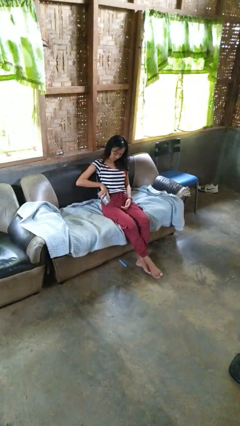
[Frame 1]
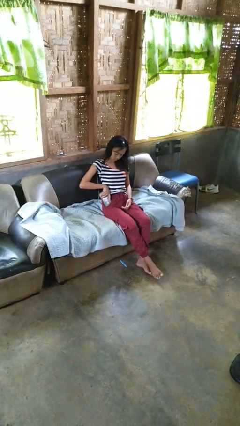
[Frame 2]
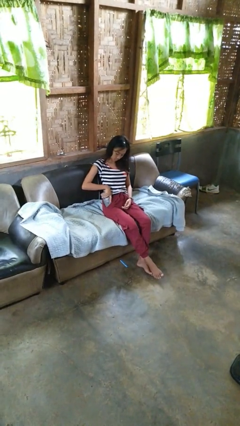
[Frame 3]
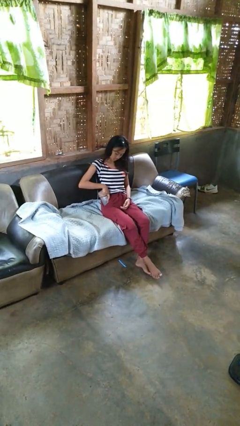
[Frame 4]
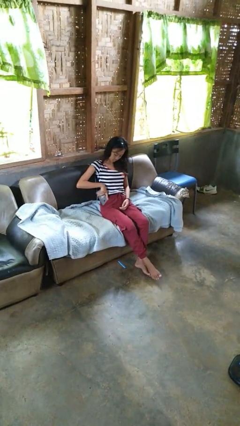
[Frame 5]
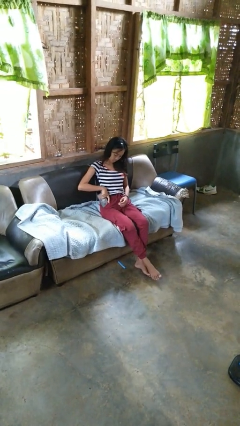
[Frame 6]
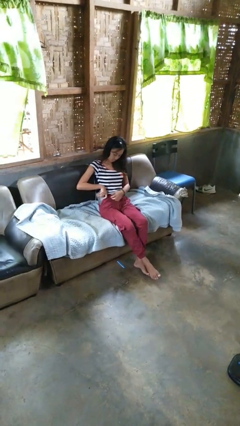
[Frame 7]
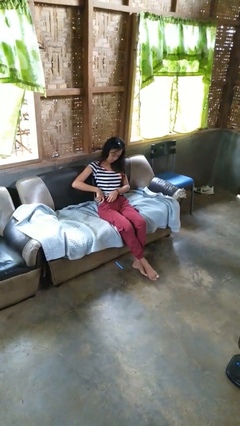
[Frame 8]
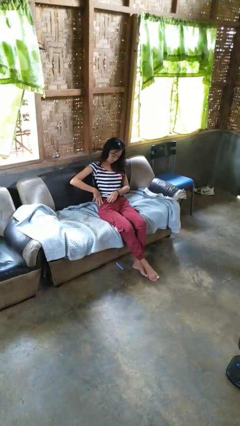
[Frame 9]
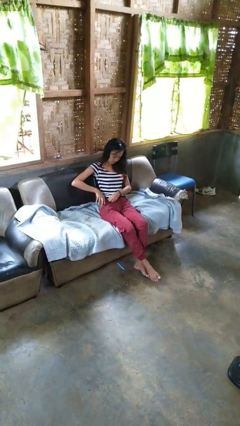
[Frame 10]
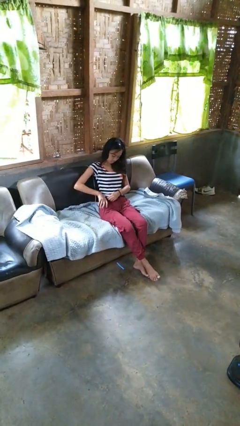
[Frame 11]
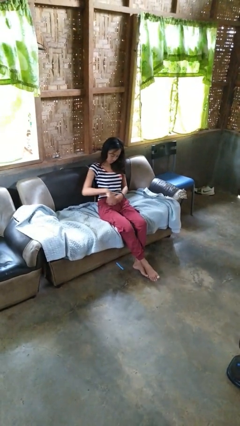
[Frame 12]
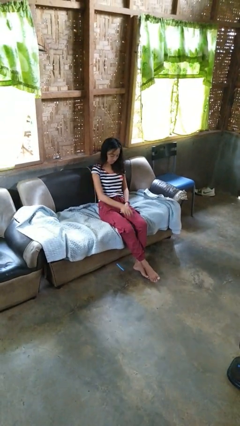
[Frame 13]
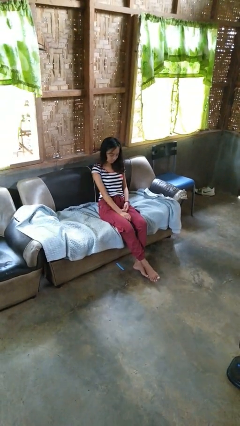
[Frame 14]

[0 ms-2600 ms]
person puts phone into pocket

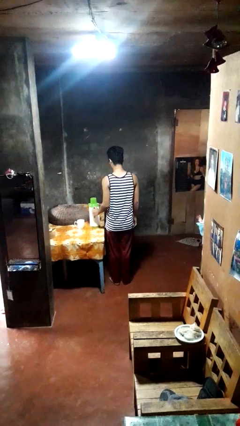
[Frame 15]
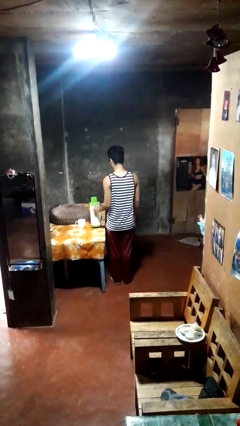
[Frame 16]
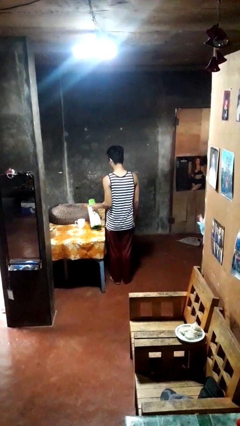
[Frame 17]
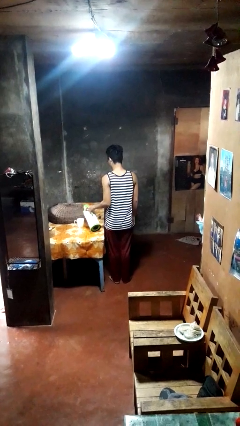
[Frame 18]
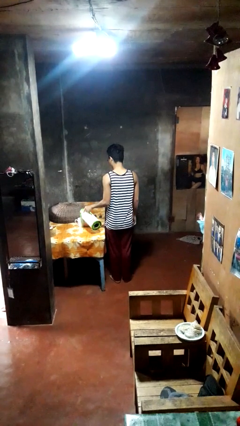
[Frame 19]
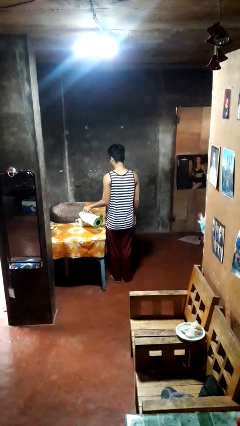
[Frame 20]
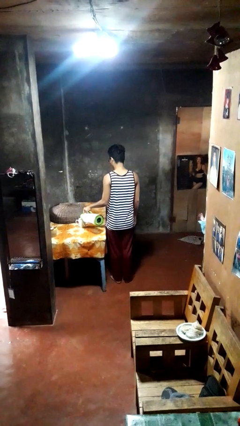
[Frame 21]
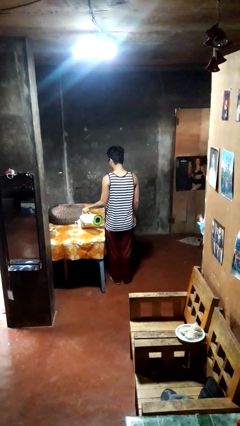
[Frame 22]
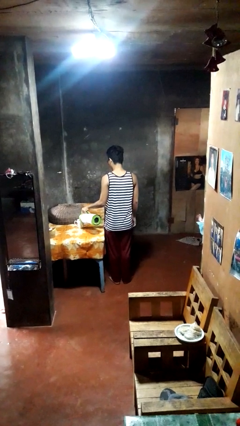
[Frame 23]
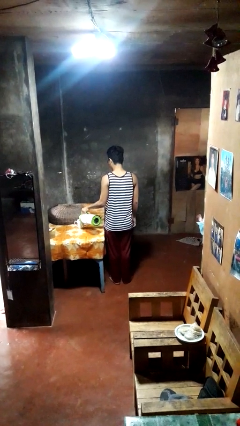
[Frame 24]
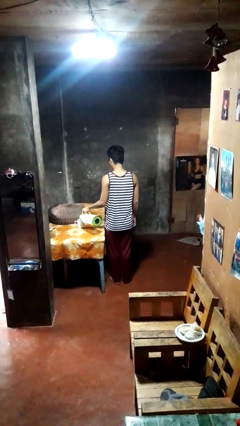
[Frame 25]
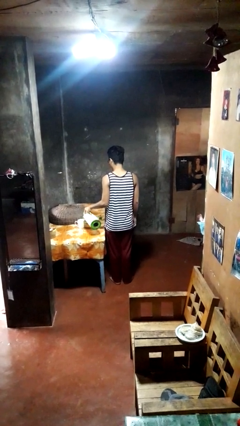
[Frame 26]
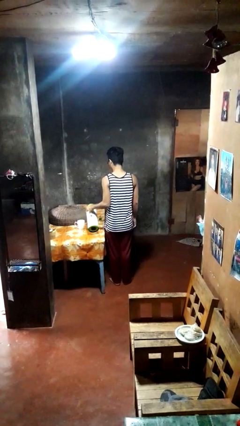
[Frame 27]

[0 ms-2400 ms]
person pours coffee into mug

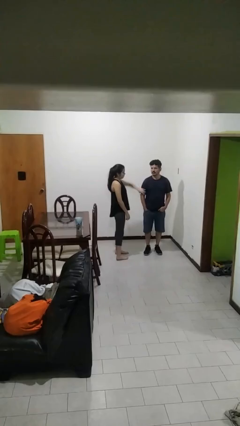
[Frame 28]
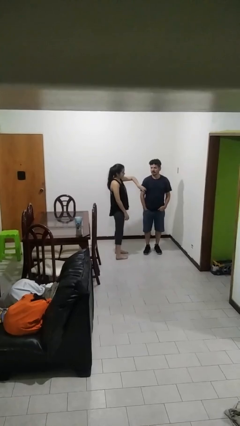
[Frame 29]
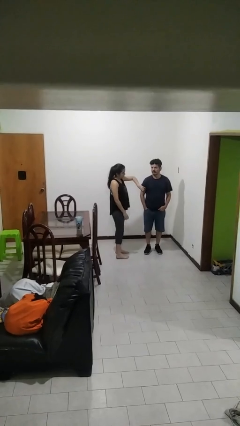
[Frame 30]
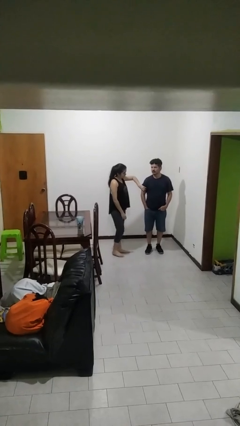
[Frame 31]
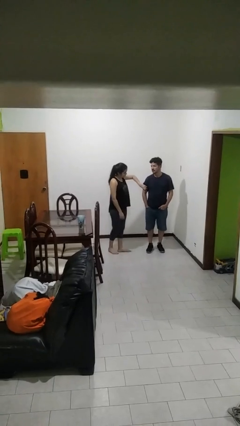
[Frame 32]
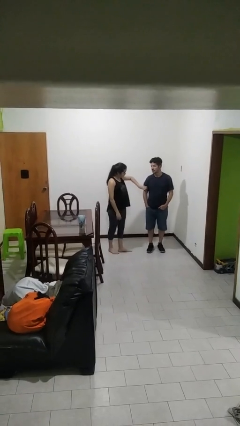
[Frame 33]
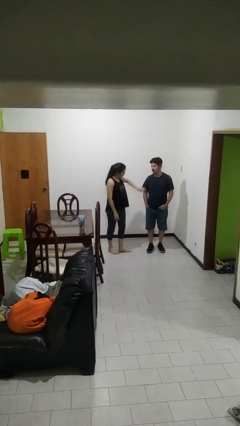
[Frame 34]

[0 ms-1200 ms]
person grabs person by bicep

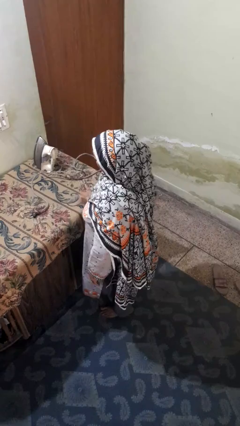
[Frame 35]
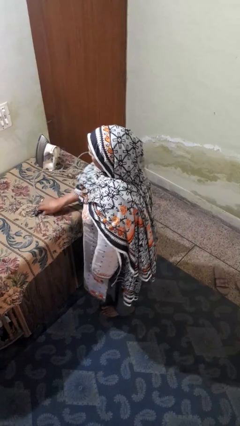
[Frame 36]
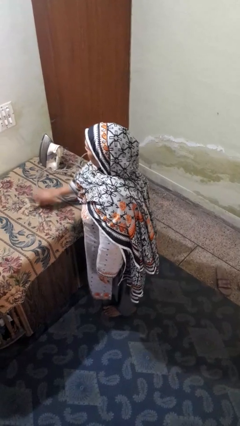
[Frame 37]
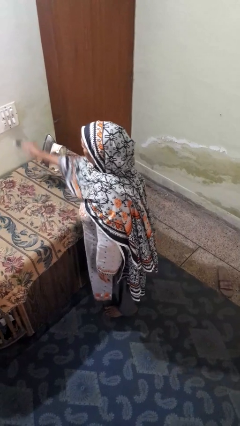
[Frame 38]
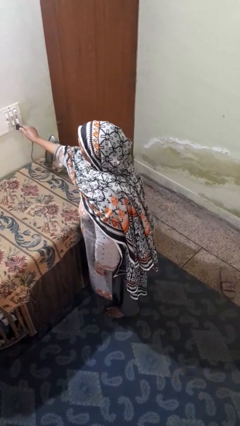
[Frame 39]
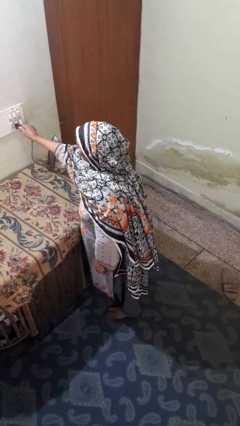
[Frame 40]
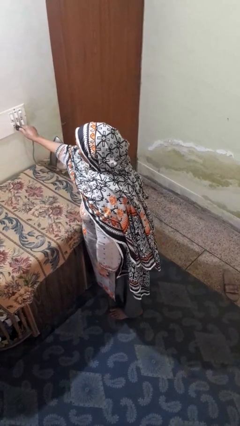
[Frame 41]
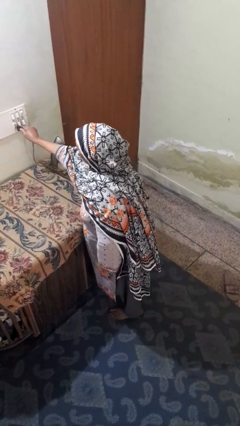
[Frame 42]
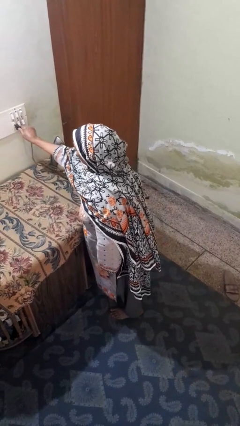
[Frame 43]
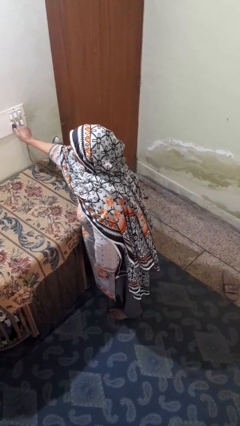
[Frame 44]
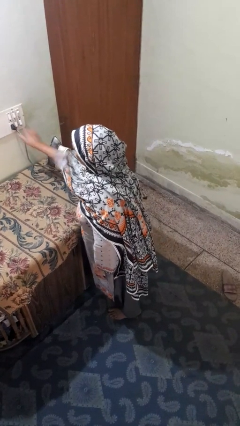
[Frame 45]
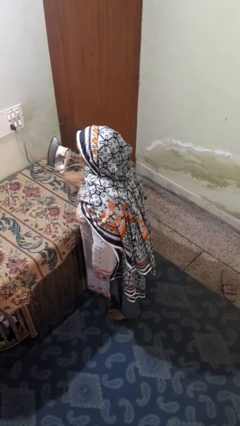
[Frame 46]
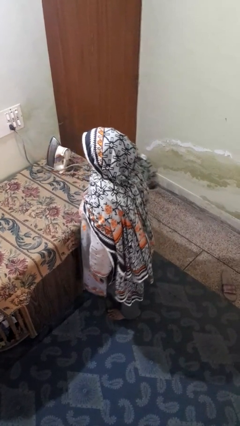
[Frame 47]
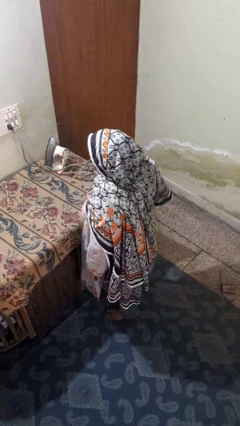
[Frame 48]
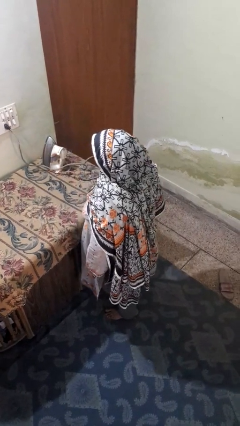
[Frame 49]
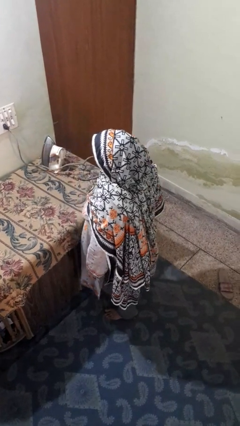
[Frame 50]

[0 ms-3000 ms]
person plugs into electrical socket

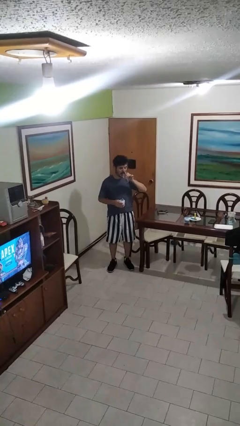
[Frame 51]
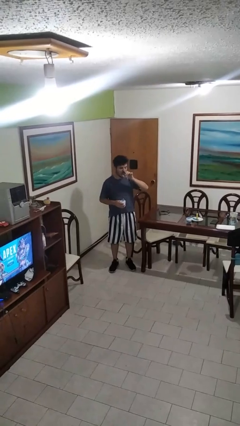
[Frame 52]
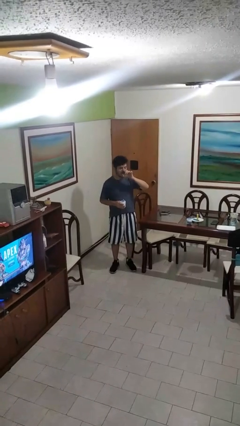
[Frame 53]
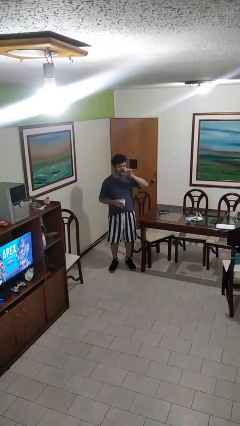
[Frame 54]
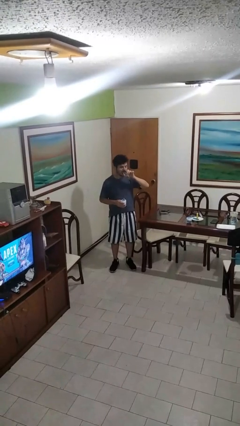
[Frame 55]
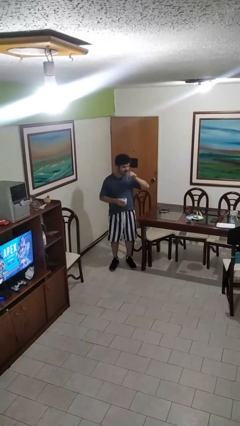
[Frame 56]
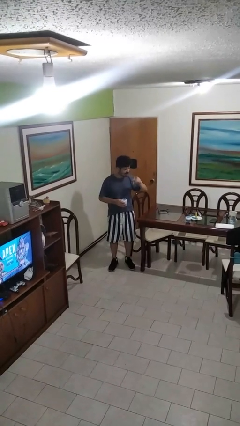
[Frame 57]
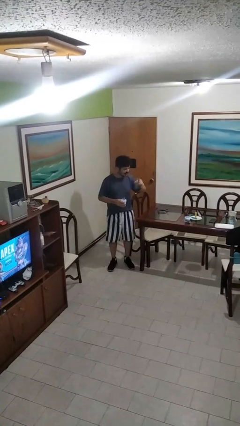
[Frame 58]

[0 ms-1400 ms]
person drinks from cup

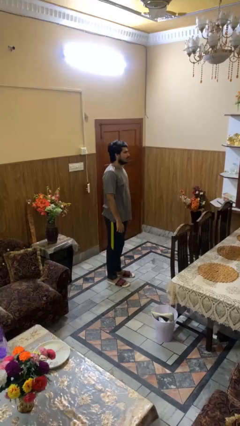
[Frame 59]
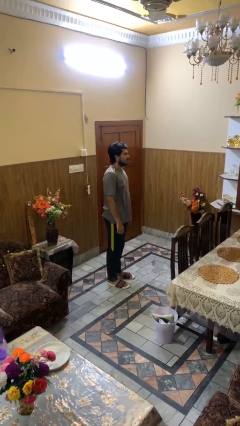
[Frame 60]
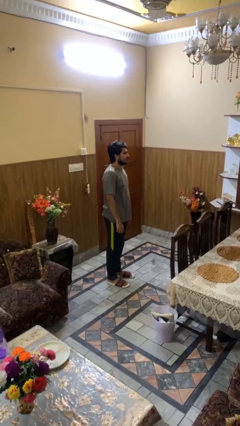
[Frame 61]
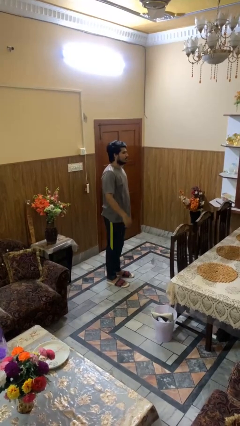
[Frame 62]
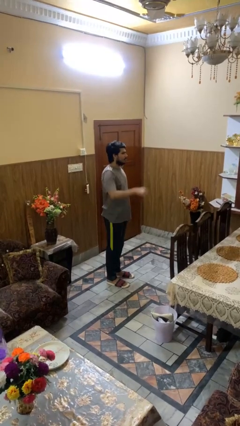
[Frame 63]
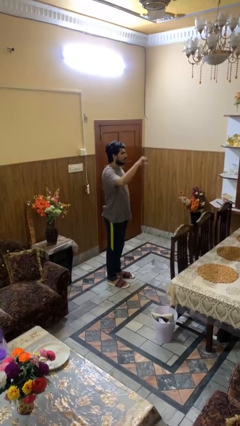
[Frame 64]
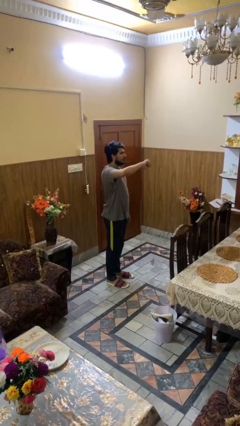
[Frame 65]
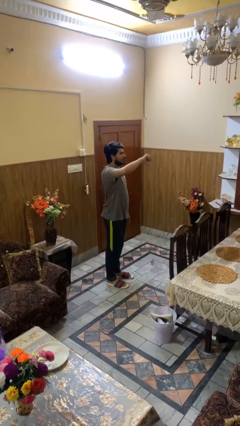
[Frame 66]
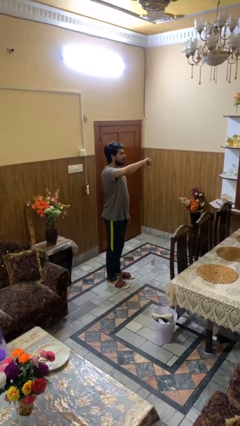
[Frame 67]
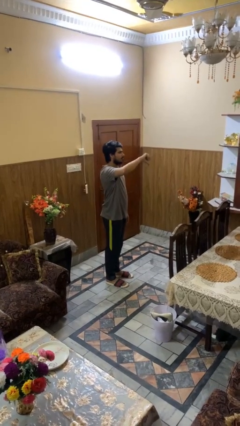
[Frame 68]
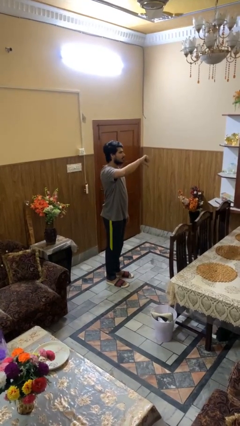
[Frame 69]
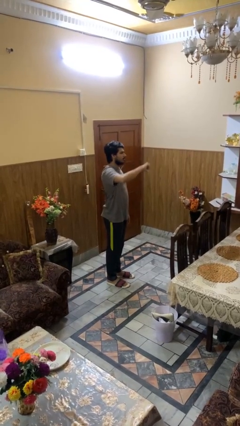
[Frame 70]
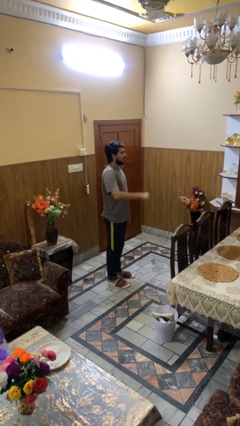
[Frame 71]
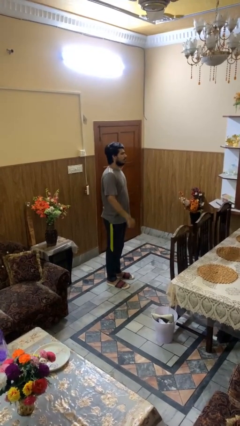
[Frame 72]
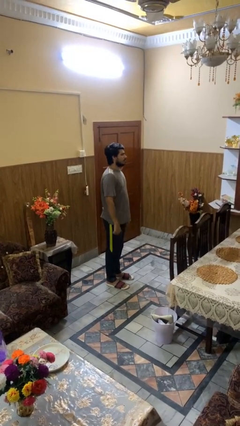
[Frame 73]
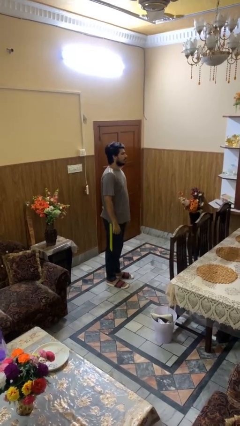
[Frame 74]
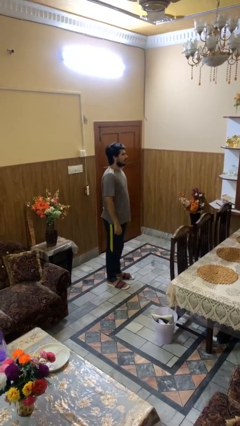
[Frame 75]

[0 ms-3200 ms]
person gestures thumbs down

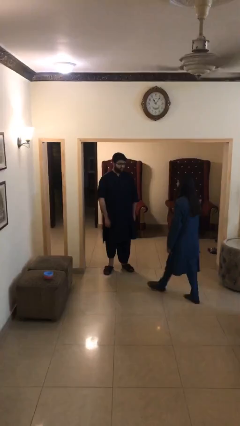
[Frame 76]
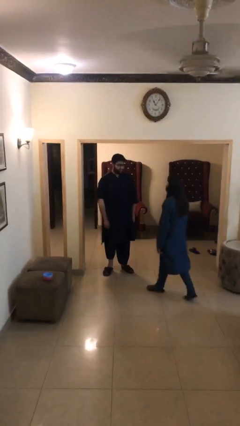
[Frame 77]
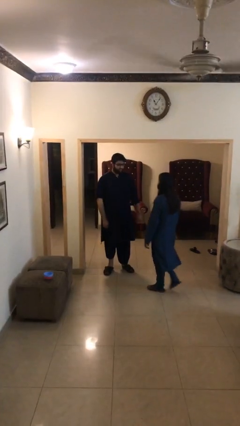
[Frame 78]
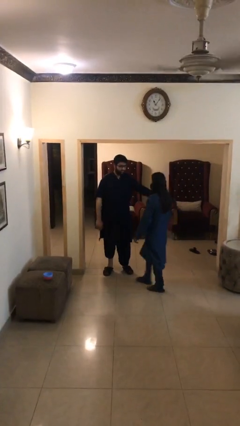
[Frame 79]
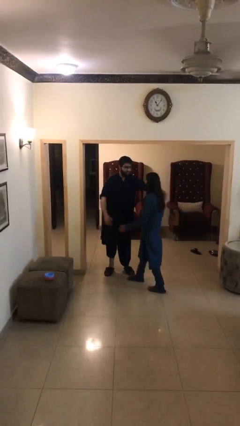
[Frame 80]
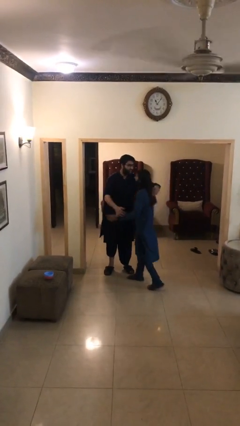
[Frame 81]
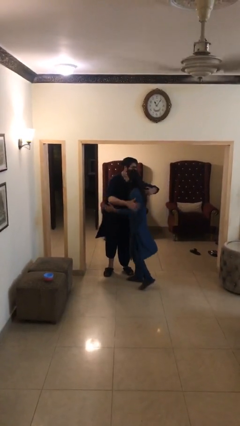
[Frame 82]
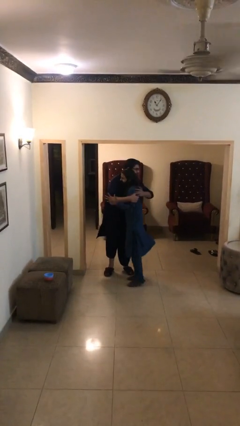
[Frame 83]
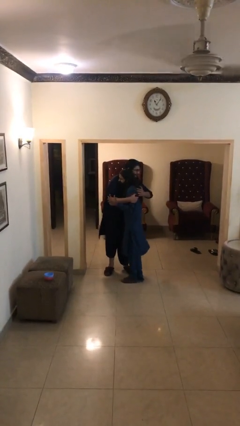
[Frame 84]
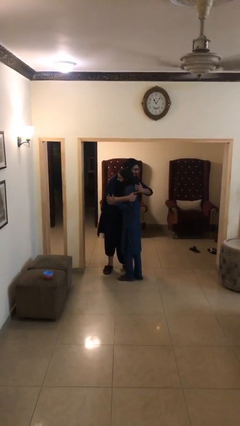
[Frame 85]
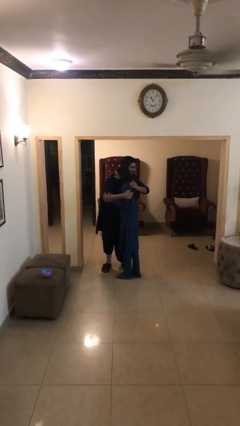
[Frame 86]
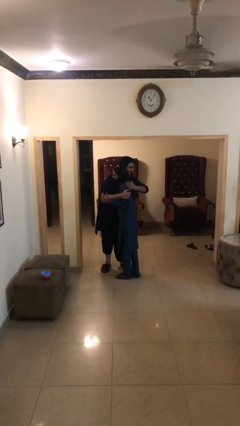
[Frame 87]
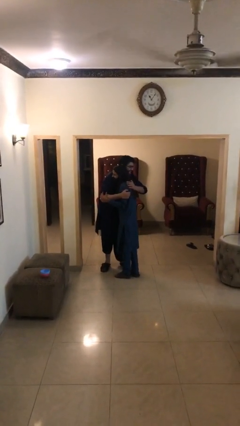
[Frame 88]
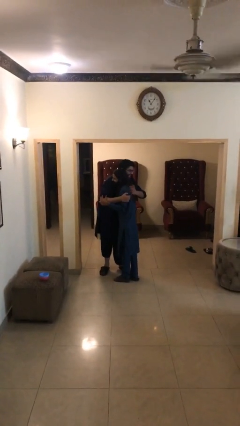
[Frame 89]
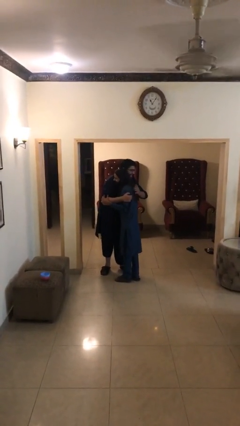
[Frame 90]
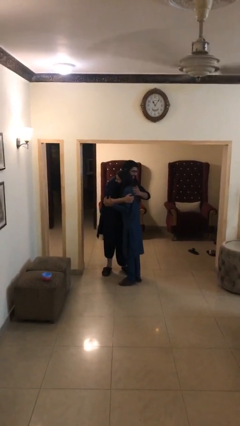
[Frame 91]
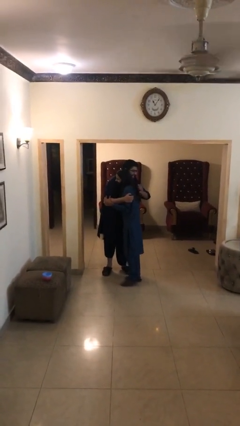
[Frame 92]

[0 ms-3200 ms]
person embraces person
